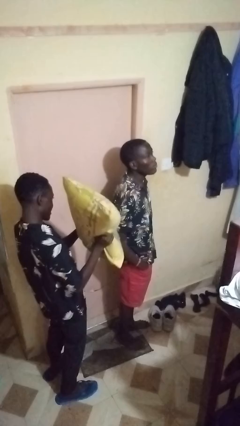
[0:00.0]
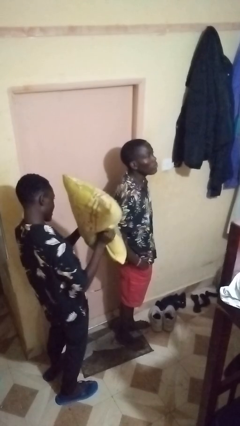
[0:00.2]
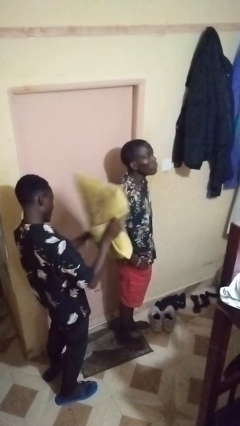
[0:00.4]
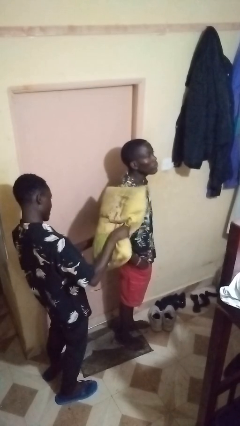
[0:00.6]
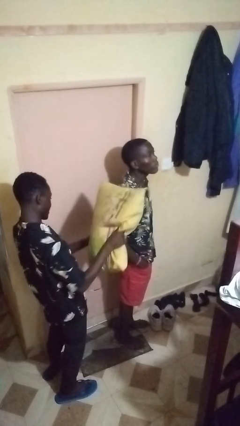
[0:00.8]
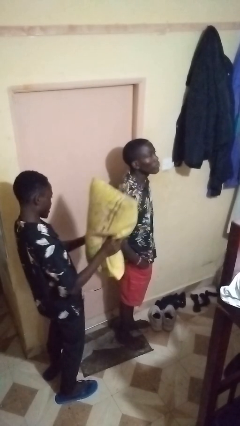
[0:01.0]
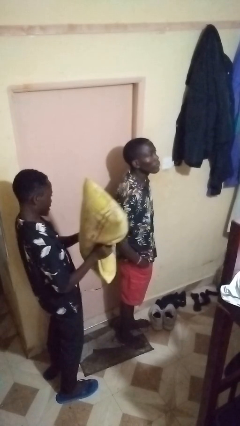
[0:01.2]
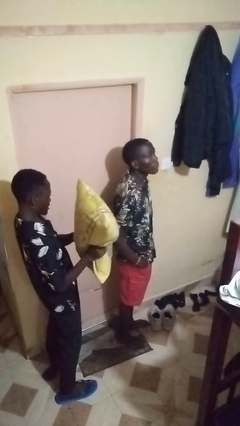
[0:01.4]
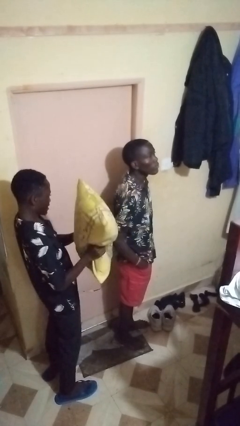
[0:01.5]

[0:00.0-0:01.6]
person hits person with pillow

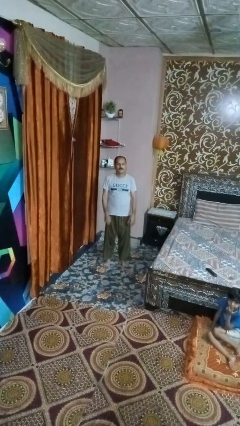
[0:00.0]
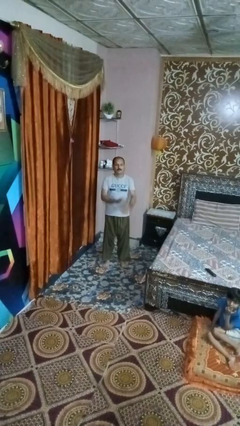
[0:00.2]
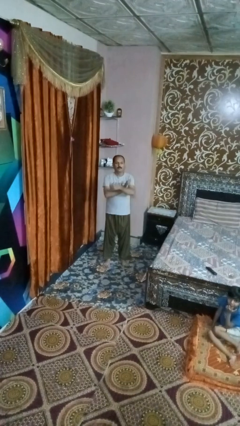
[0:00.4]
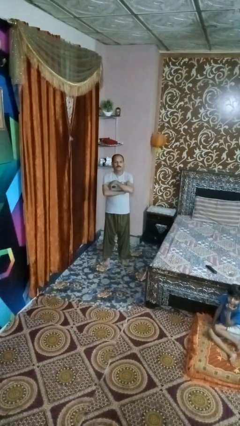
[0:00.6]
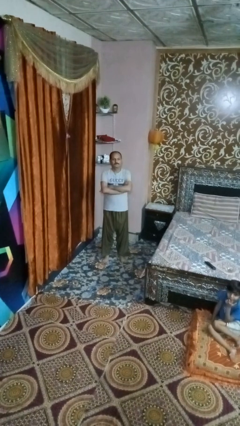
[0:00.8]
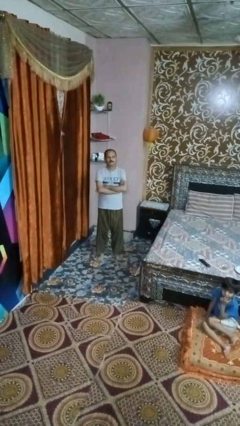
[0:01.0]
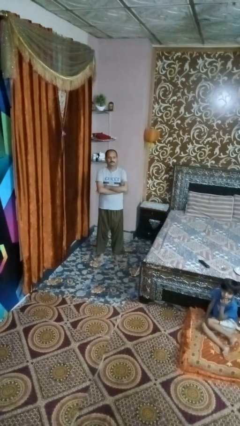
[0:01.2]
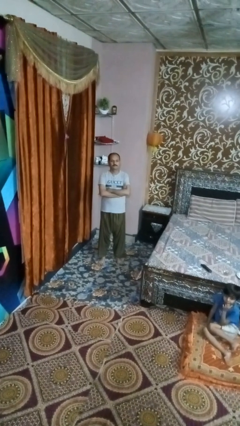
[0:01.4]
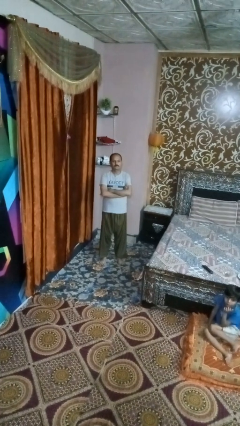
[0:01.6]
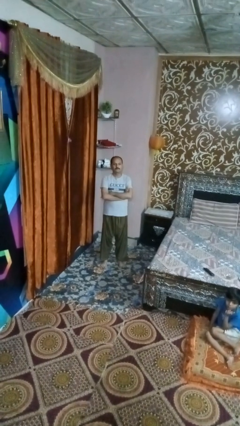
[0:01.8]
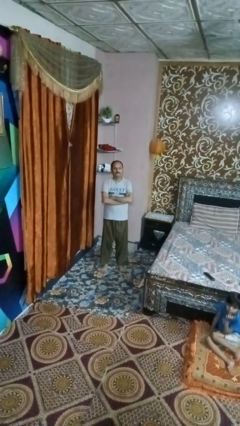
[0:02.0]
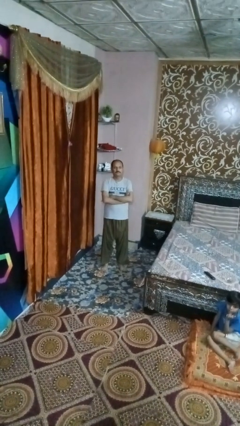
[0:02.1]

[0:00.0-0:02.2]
person crosses arms

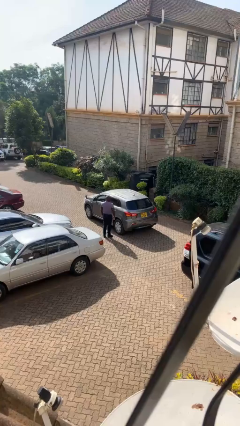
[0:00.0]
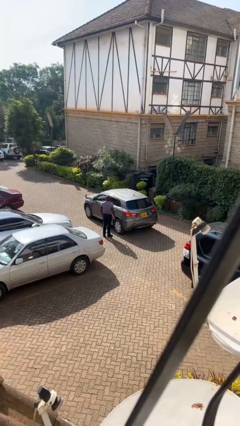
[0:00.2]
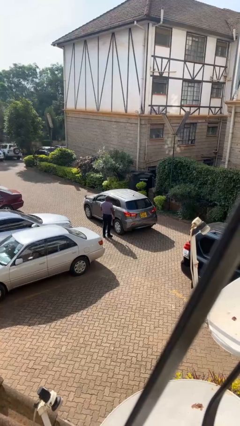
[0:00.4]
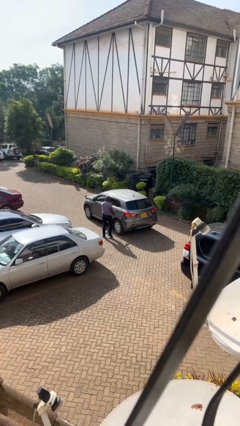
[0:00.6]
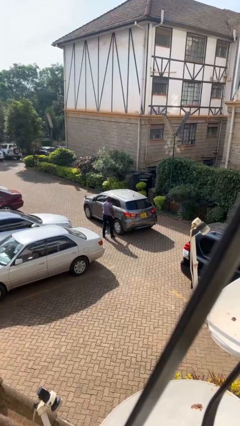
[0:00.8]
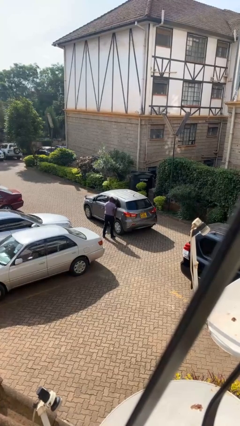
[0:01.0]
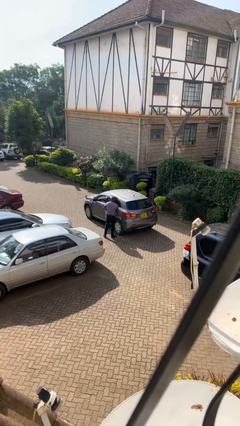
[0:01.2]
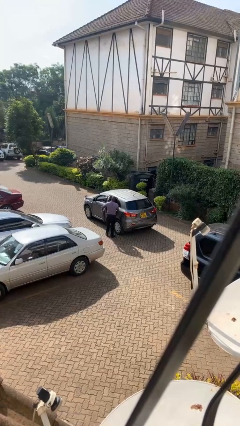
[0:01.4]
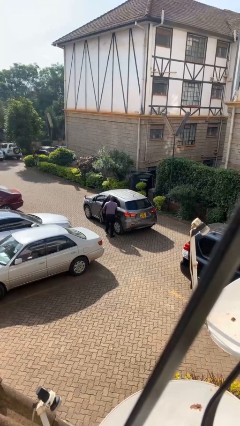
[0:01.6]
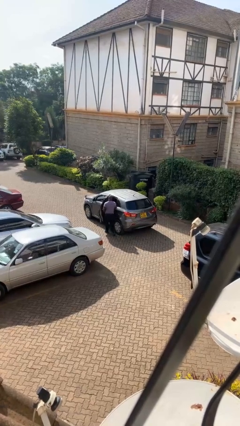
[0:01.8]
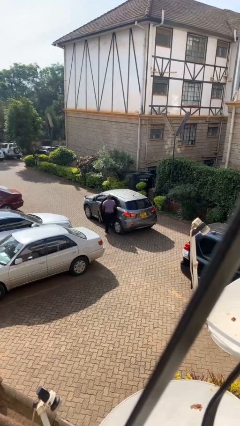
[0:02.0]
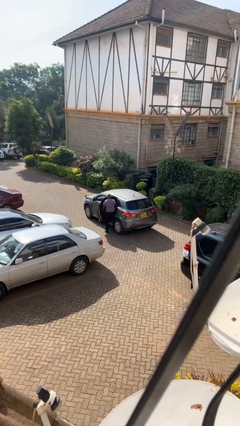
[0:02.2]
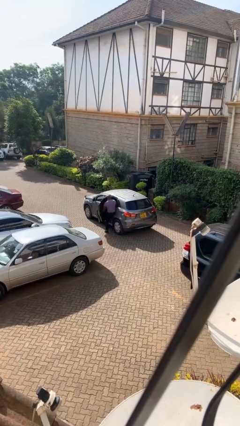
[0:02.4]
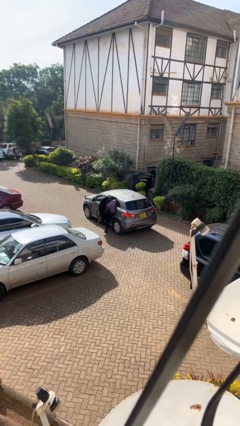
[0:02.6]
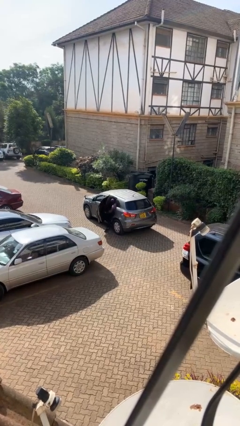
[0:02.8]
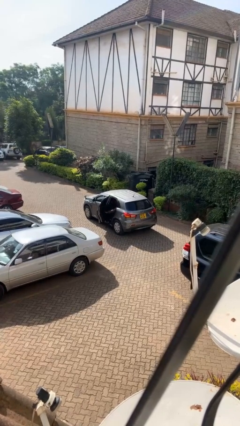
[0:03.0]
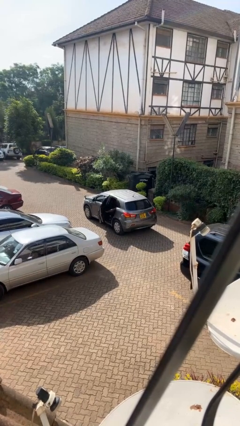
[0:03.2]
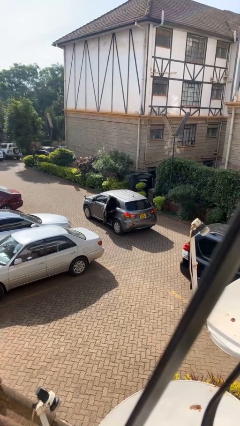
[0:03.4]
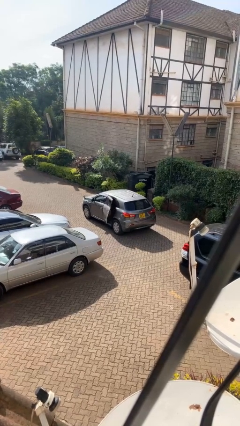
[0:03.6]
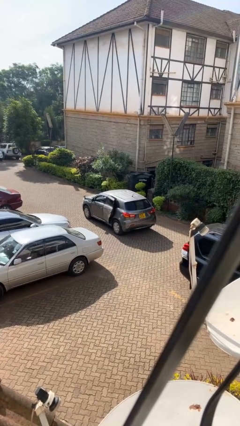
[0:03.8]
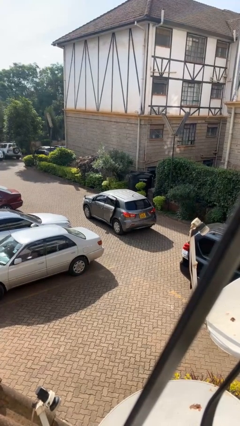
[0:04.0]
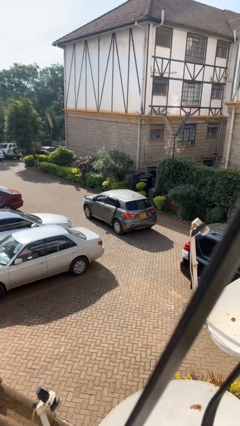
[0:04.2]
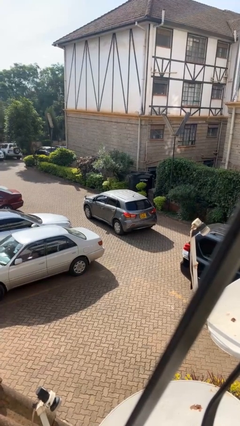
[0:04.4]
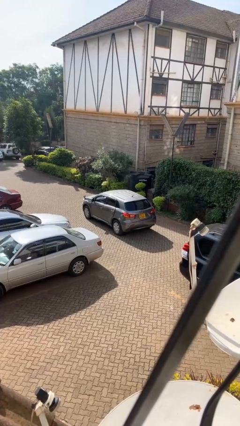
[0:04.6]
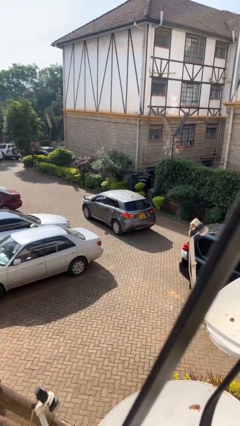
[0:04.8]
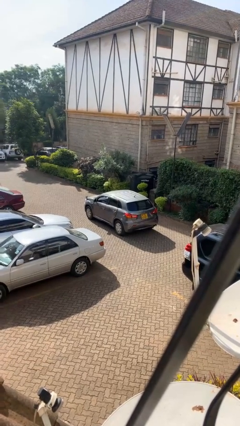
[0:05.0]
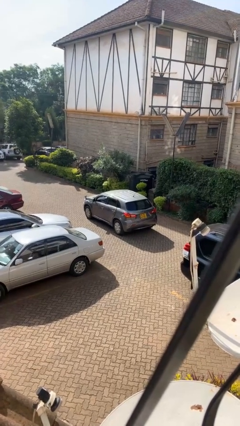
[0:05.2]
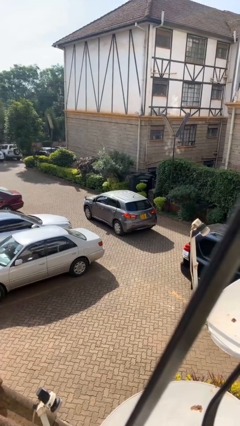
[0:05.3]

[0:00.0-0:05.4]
car picks up person

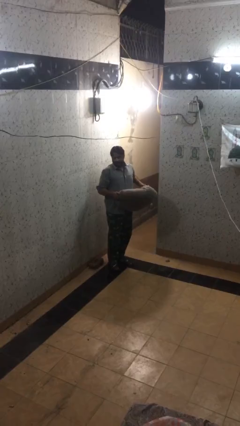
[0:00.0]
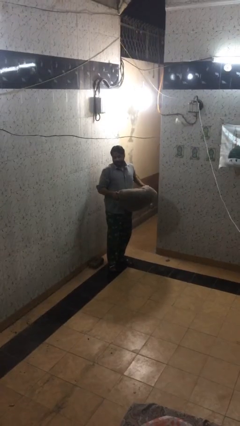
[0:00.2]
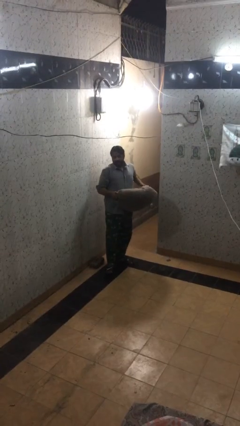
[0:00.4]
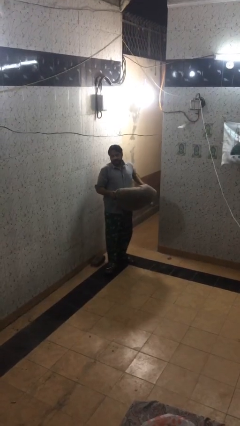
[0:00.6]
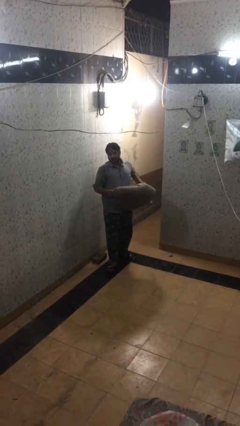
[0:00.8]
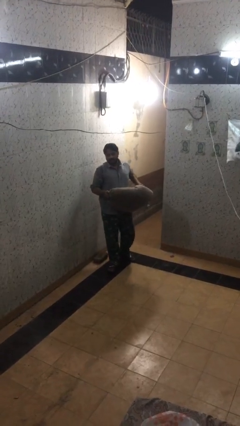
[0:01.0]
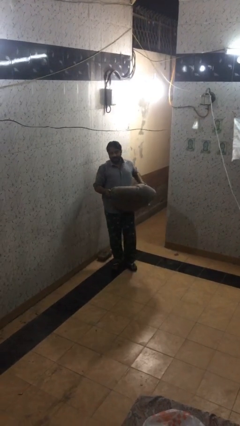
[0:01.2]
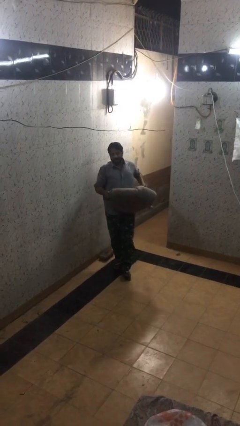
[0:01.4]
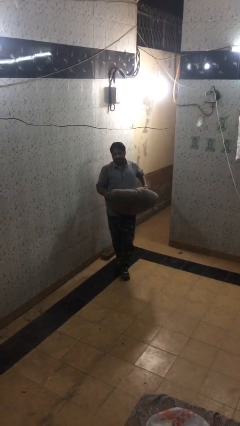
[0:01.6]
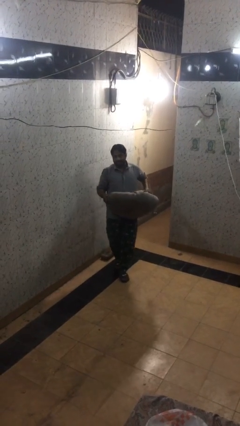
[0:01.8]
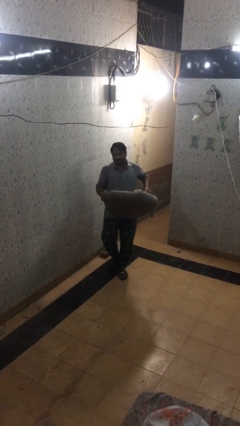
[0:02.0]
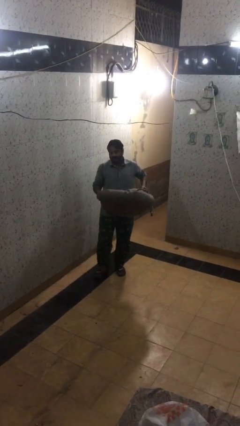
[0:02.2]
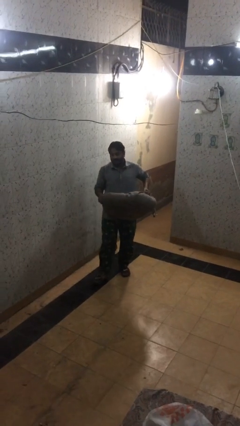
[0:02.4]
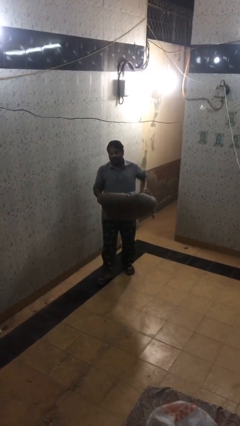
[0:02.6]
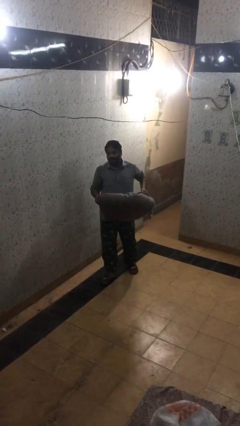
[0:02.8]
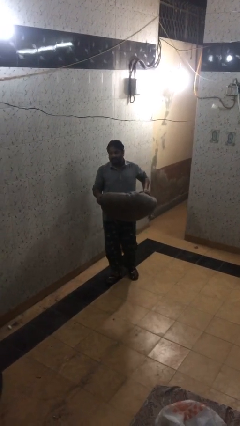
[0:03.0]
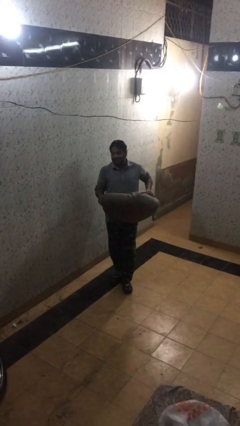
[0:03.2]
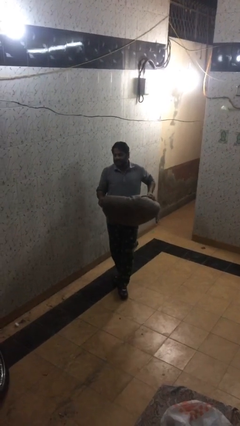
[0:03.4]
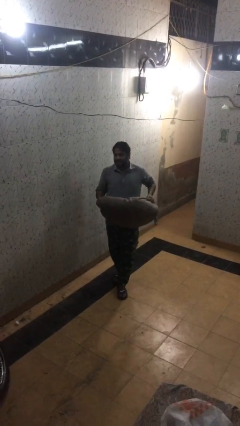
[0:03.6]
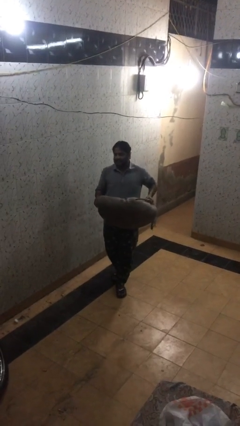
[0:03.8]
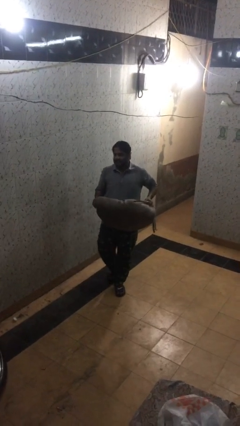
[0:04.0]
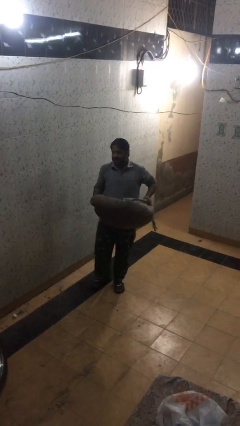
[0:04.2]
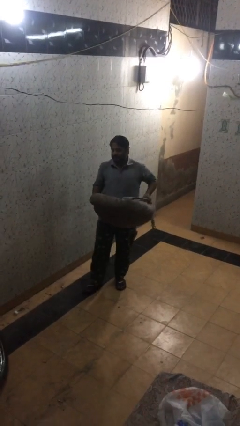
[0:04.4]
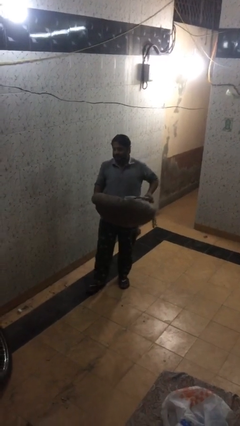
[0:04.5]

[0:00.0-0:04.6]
person carries heavy object

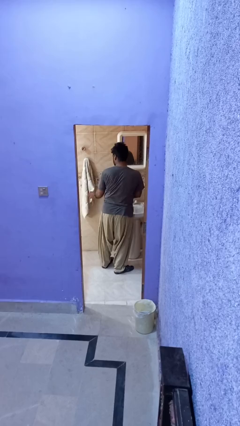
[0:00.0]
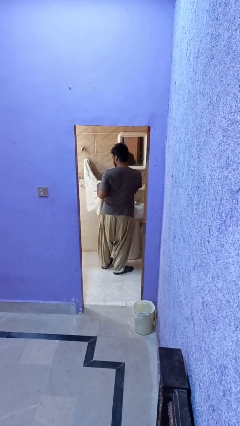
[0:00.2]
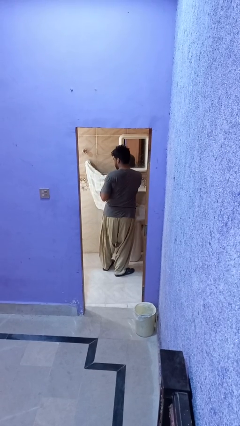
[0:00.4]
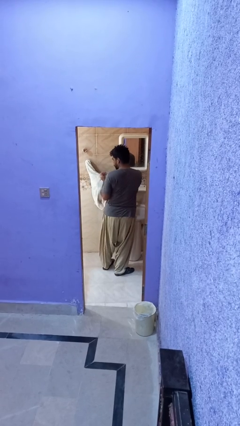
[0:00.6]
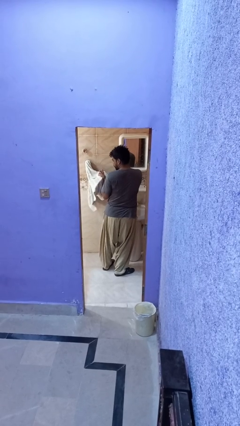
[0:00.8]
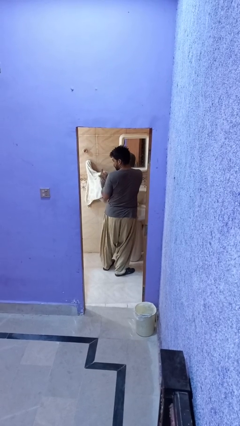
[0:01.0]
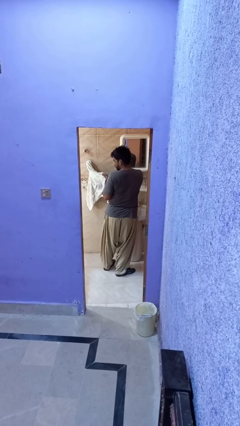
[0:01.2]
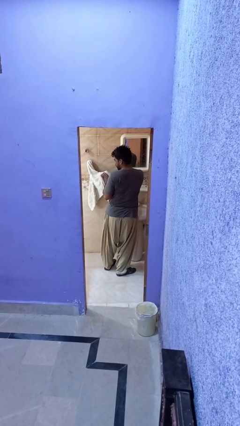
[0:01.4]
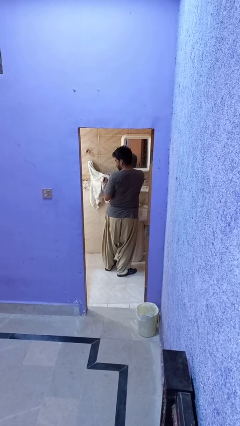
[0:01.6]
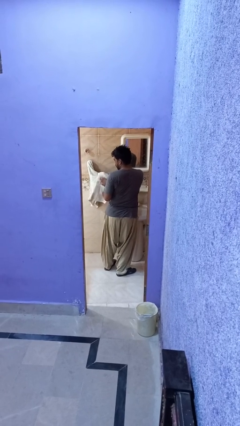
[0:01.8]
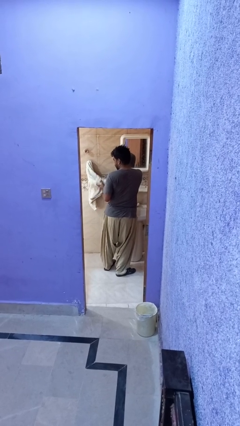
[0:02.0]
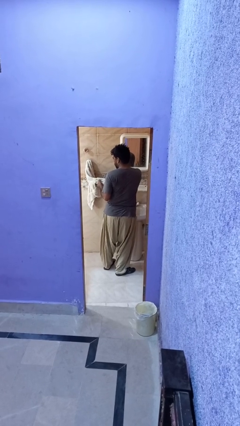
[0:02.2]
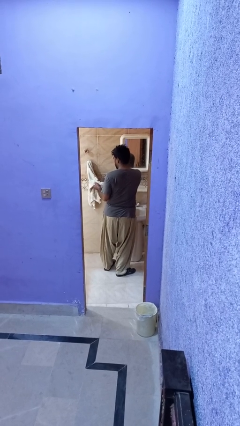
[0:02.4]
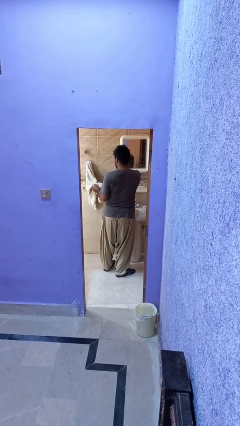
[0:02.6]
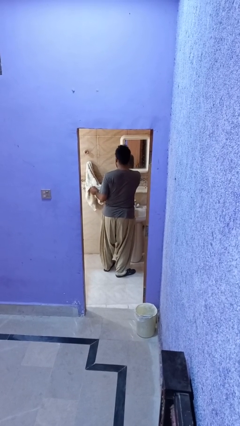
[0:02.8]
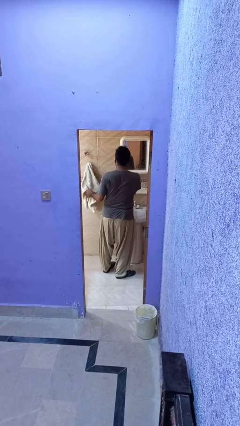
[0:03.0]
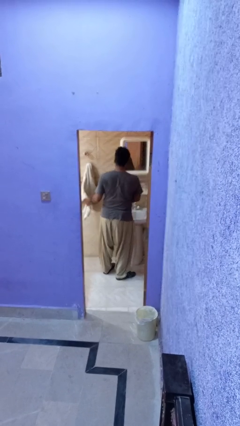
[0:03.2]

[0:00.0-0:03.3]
person dries hands with towel

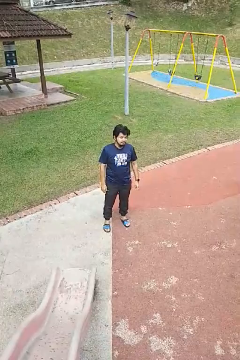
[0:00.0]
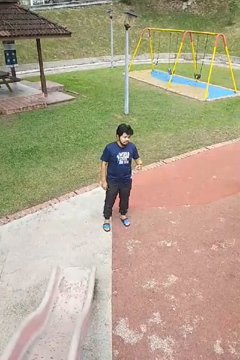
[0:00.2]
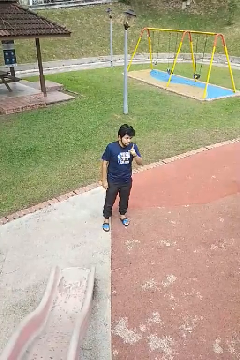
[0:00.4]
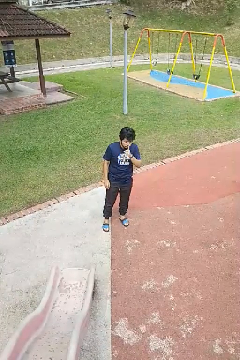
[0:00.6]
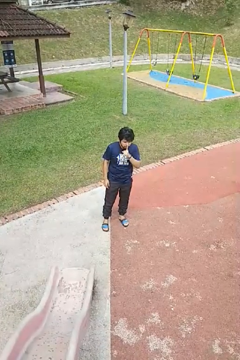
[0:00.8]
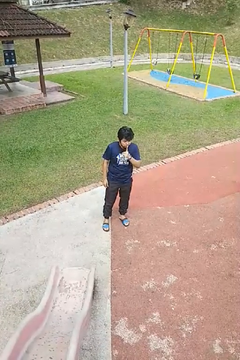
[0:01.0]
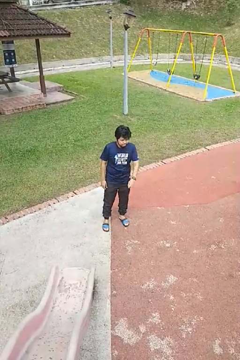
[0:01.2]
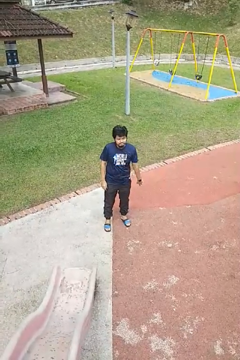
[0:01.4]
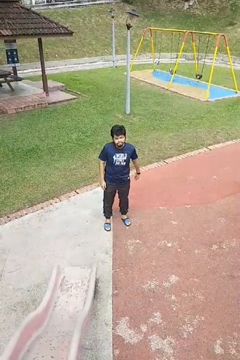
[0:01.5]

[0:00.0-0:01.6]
person gestures be quiet
